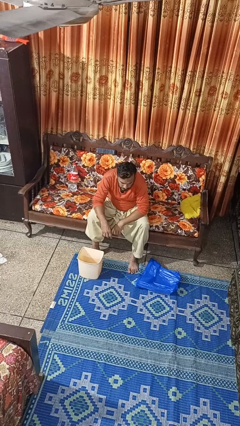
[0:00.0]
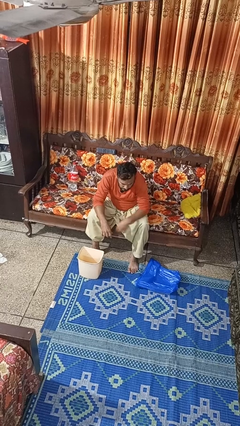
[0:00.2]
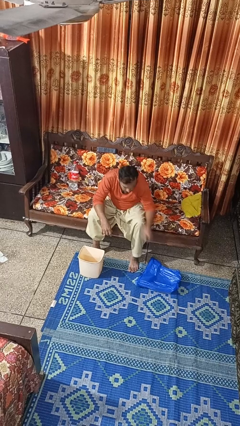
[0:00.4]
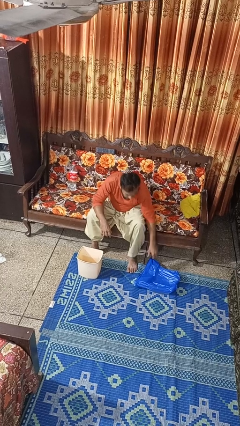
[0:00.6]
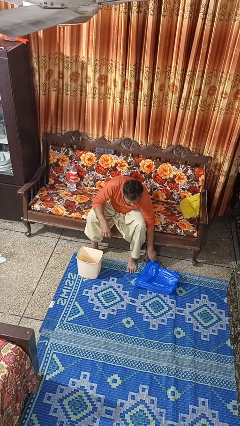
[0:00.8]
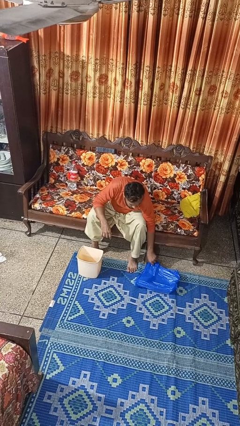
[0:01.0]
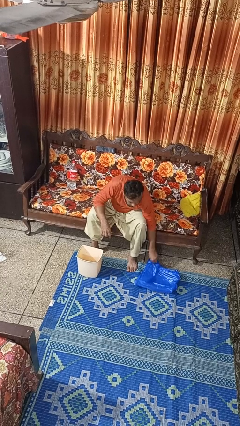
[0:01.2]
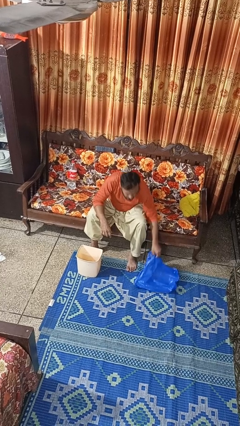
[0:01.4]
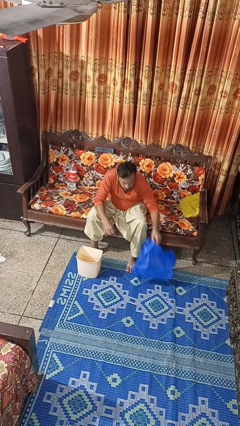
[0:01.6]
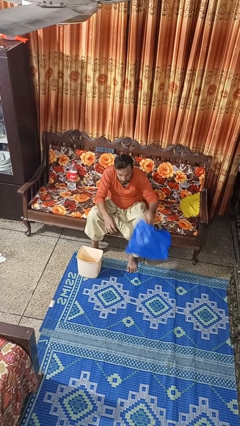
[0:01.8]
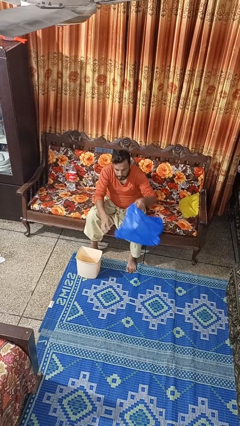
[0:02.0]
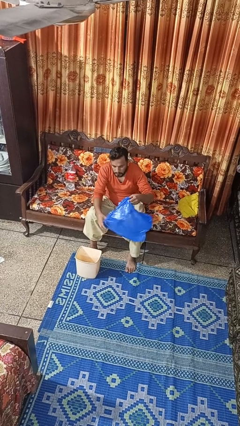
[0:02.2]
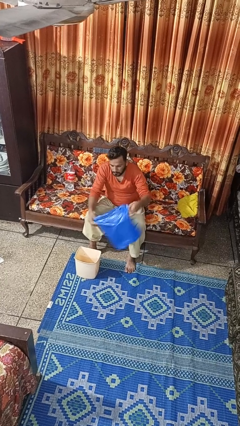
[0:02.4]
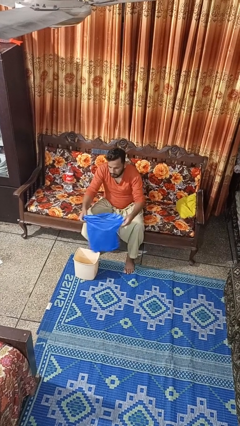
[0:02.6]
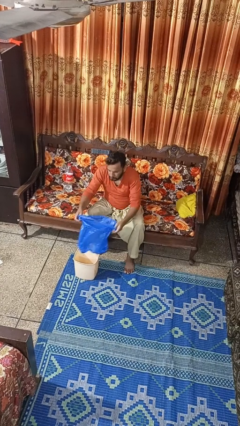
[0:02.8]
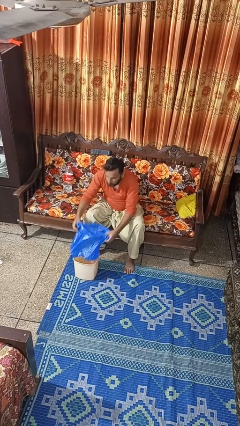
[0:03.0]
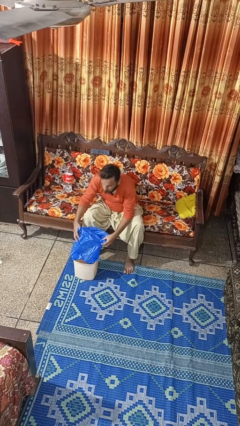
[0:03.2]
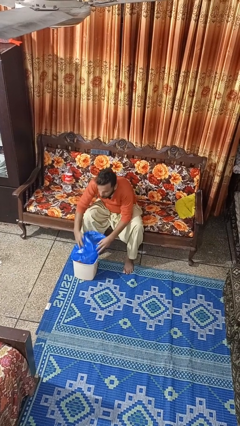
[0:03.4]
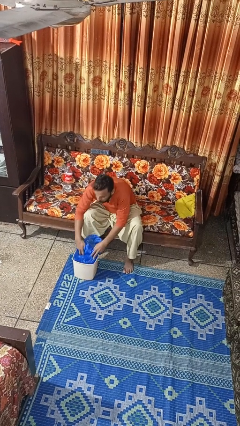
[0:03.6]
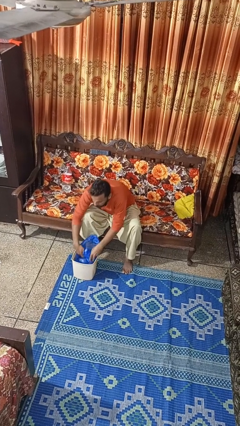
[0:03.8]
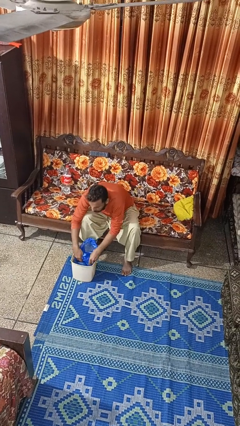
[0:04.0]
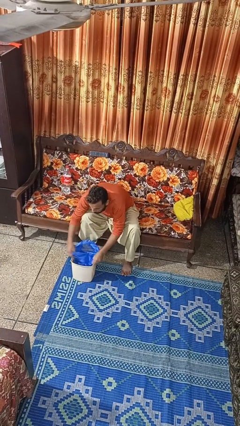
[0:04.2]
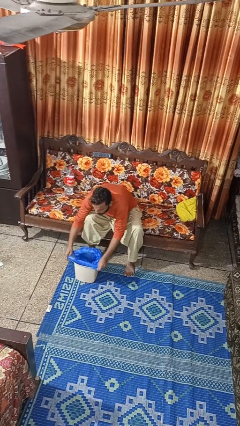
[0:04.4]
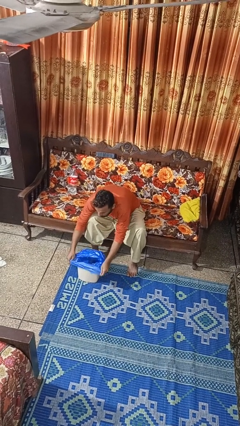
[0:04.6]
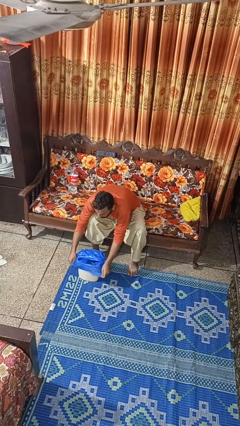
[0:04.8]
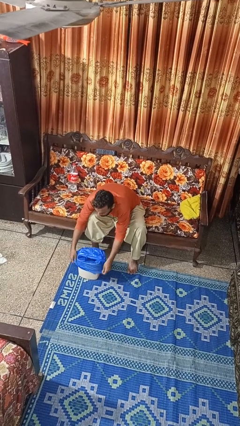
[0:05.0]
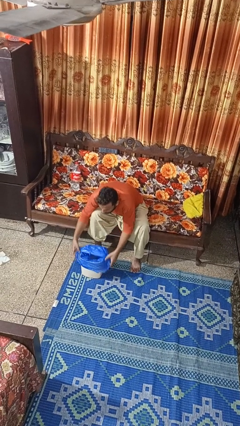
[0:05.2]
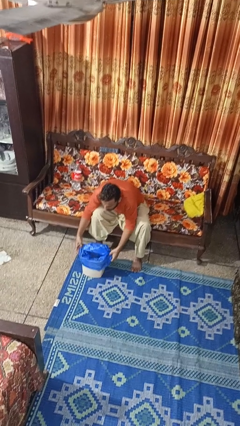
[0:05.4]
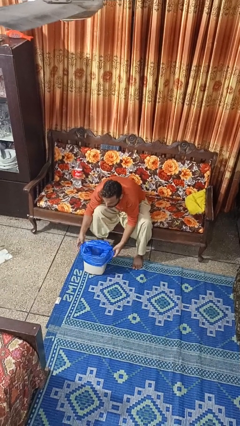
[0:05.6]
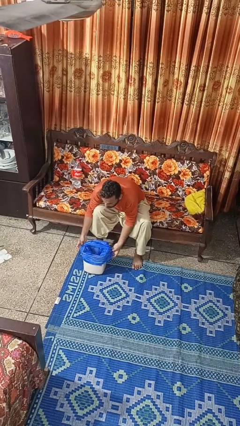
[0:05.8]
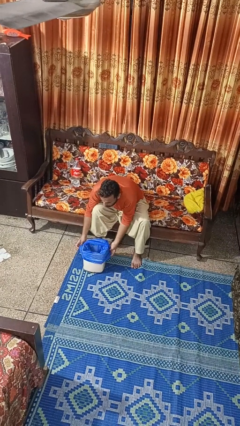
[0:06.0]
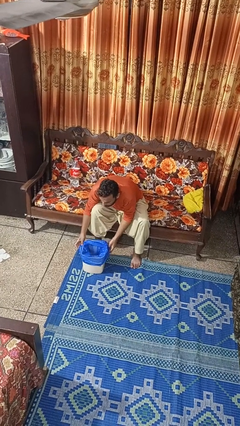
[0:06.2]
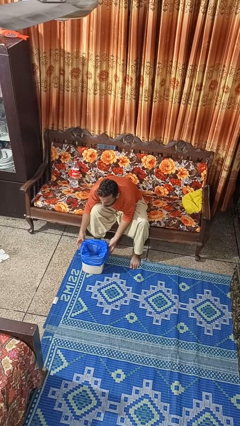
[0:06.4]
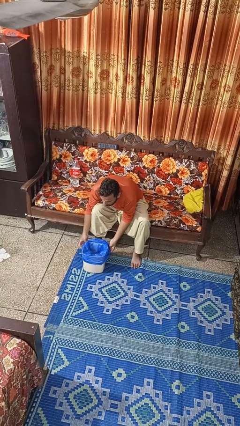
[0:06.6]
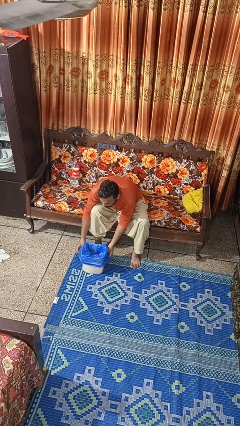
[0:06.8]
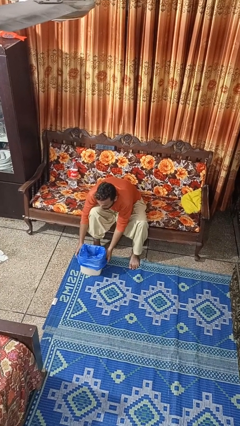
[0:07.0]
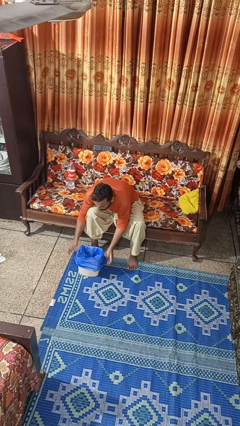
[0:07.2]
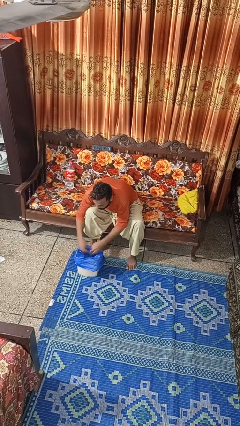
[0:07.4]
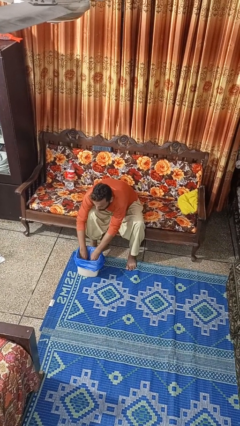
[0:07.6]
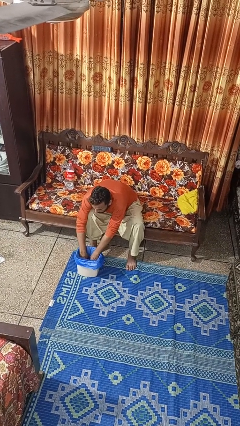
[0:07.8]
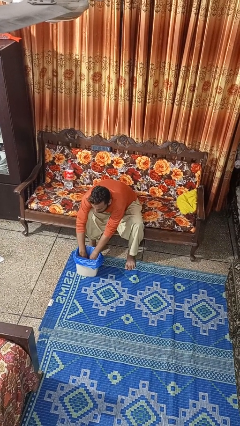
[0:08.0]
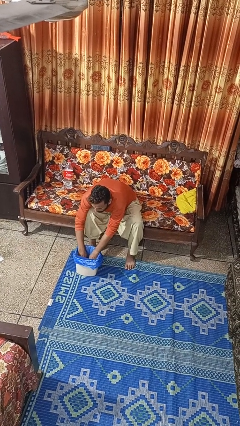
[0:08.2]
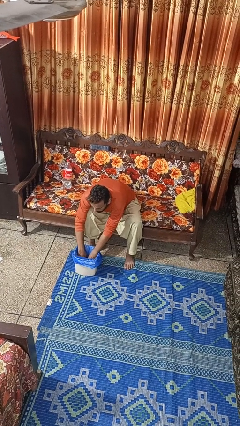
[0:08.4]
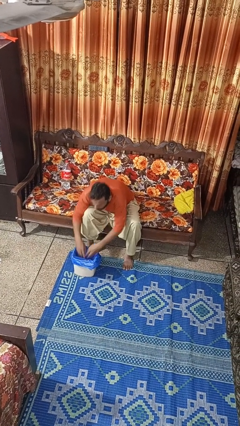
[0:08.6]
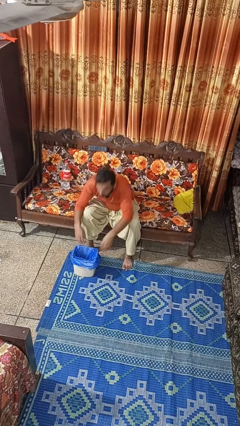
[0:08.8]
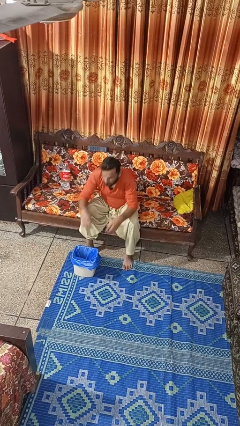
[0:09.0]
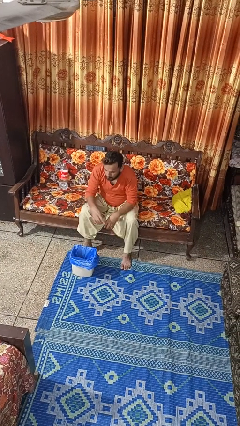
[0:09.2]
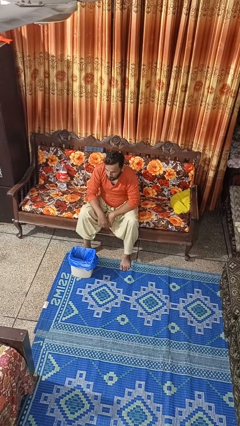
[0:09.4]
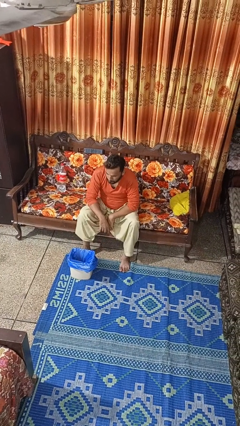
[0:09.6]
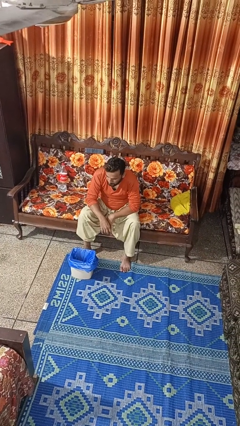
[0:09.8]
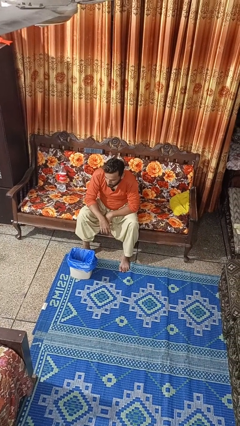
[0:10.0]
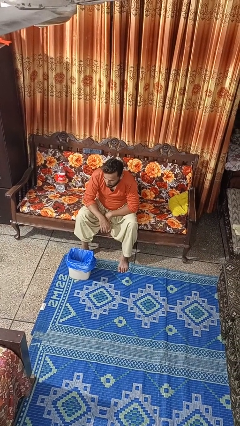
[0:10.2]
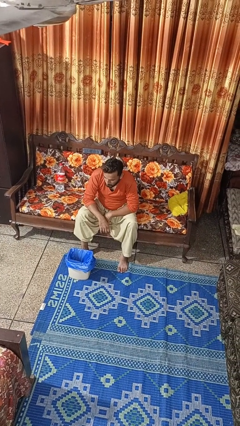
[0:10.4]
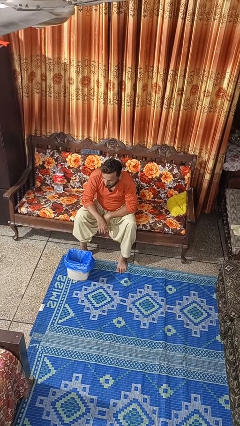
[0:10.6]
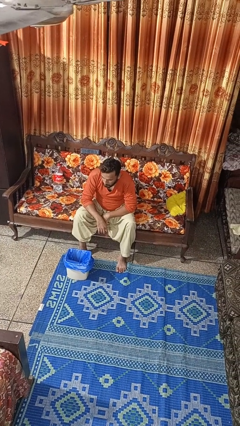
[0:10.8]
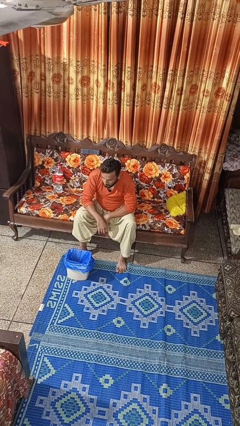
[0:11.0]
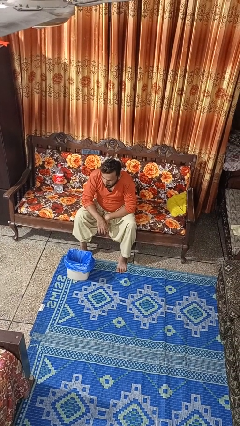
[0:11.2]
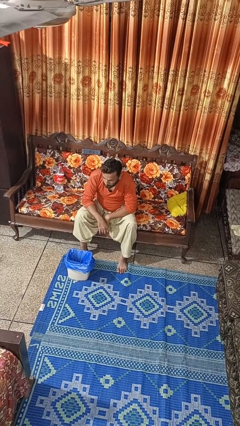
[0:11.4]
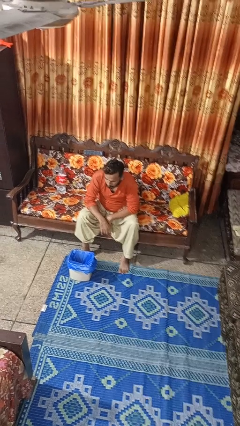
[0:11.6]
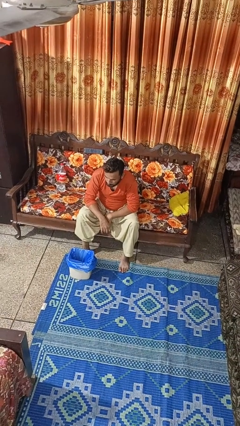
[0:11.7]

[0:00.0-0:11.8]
person inserts trashbag into trashcan

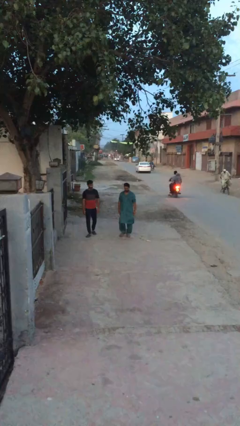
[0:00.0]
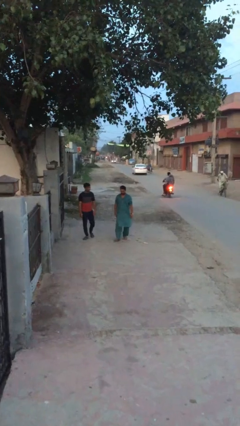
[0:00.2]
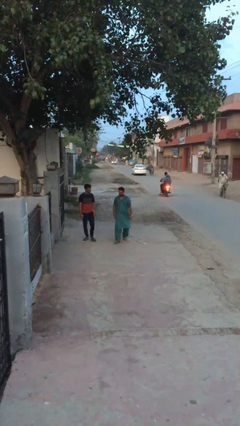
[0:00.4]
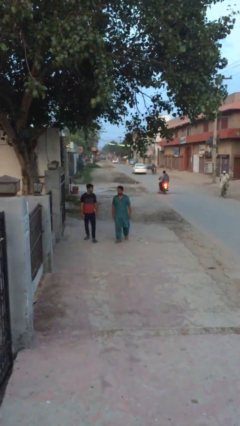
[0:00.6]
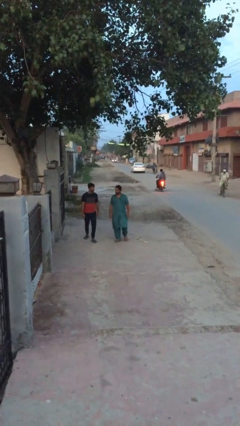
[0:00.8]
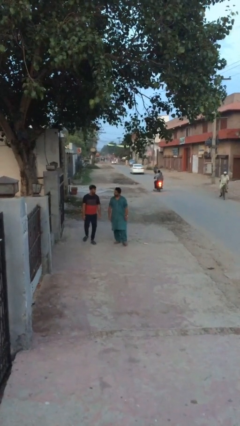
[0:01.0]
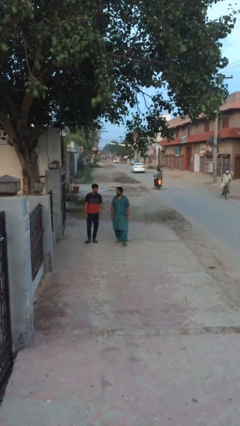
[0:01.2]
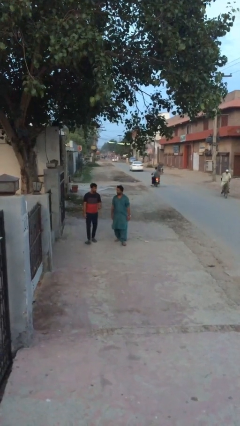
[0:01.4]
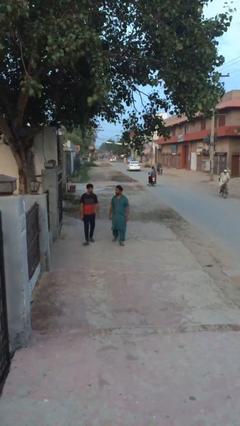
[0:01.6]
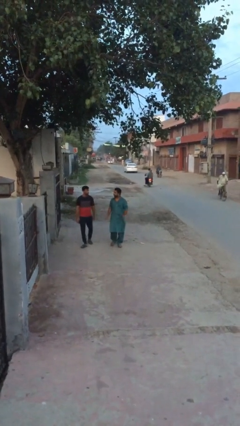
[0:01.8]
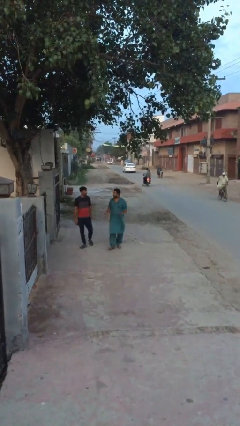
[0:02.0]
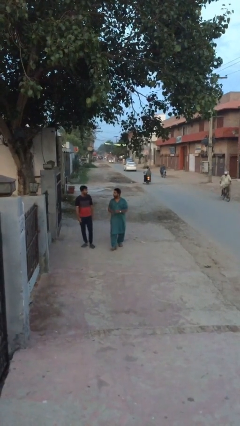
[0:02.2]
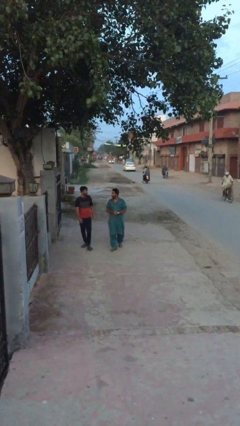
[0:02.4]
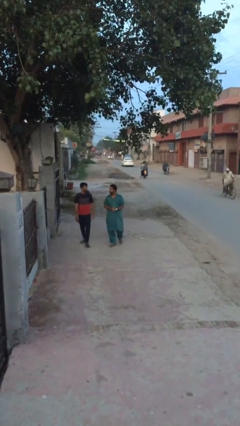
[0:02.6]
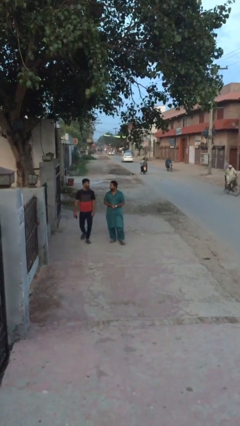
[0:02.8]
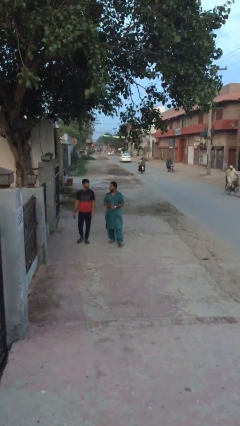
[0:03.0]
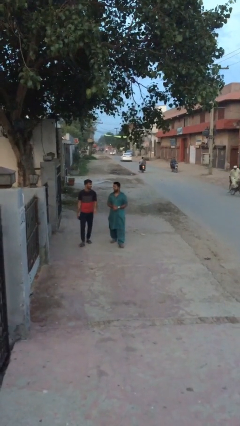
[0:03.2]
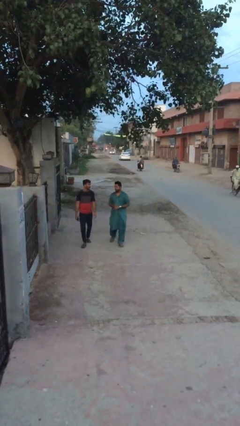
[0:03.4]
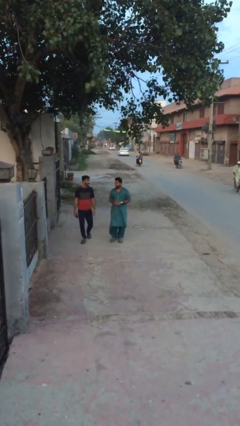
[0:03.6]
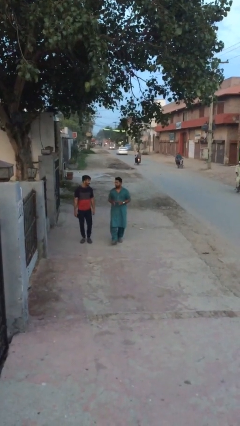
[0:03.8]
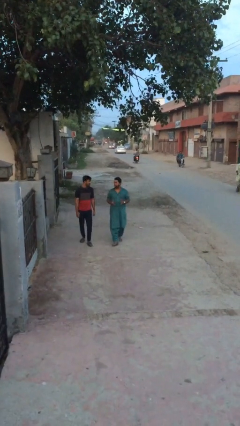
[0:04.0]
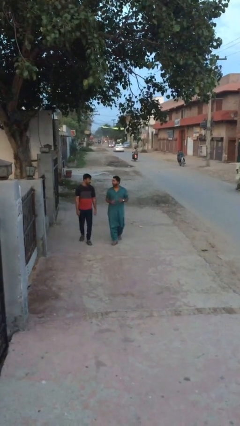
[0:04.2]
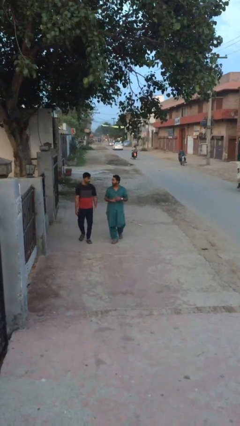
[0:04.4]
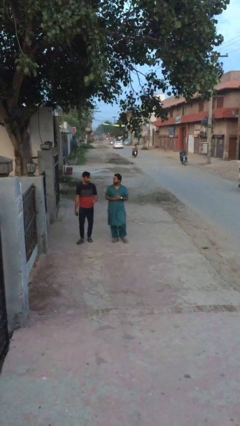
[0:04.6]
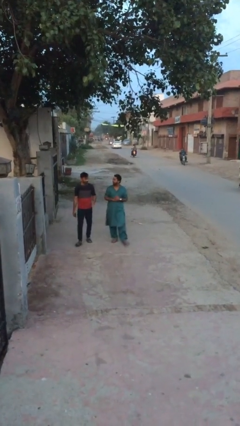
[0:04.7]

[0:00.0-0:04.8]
person talks to person

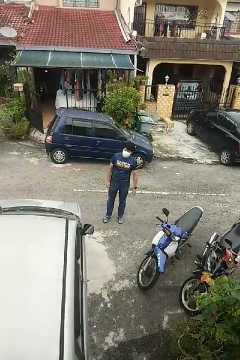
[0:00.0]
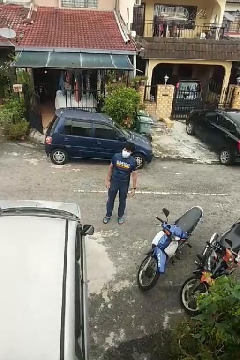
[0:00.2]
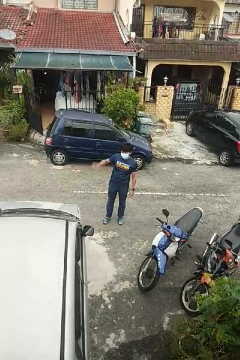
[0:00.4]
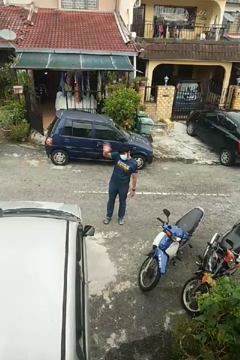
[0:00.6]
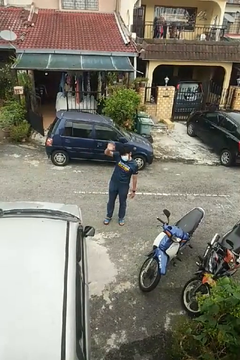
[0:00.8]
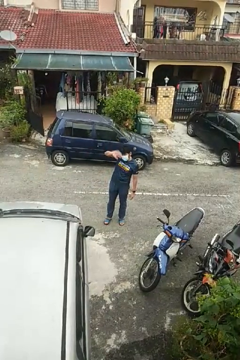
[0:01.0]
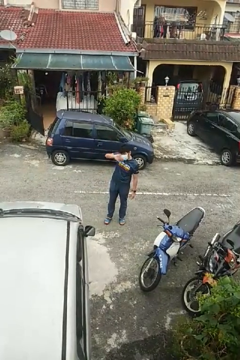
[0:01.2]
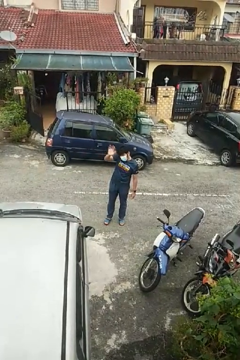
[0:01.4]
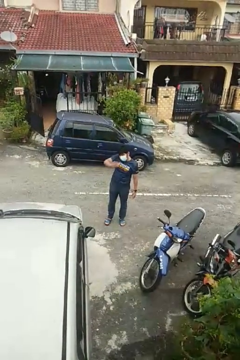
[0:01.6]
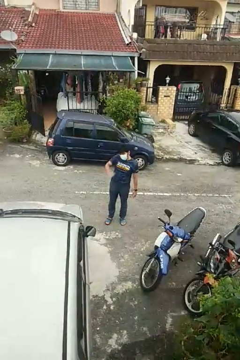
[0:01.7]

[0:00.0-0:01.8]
person waves at person

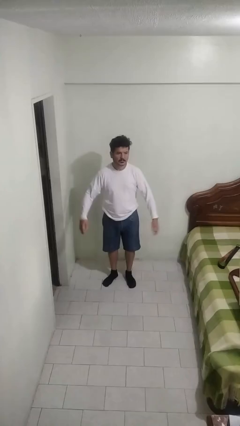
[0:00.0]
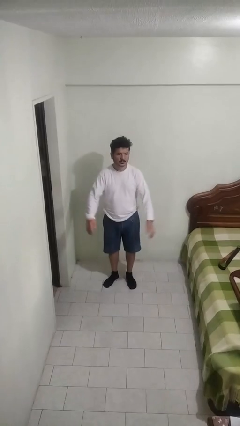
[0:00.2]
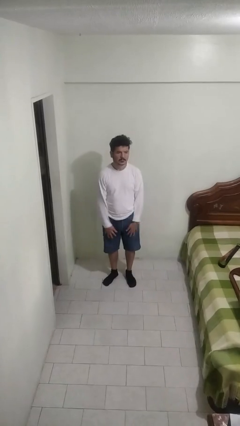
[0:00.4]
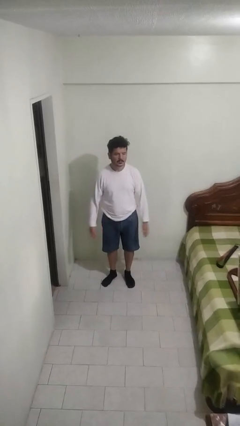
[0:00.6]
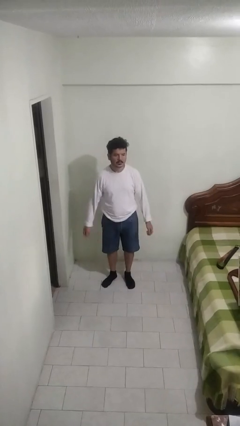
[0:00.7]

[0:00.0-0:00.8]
person slaps hands on thighs
